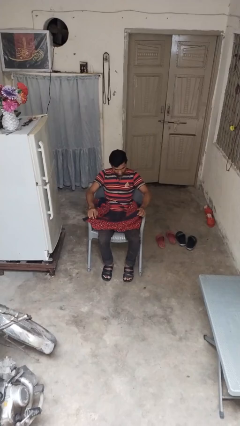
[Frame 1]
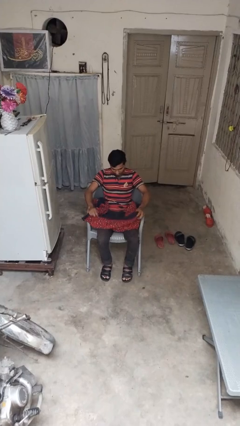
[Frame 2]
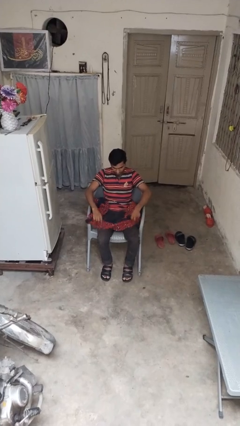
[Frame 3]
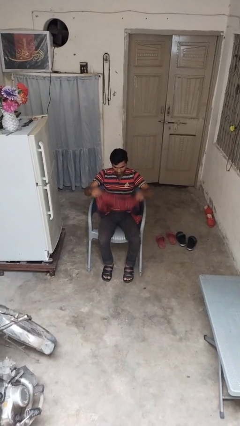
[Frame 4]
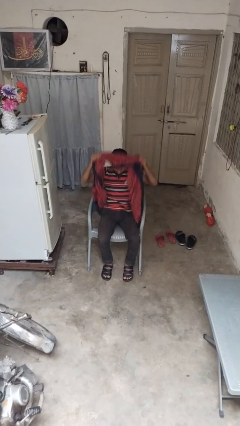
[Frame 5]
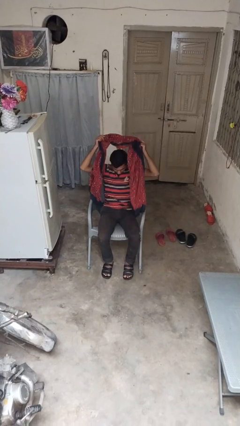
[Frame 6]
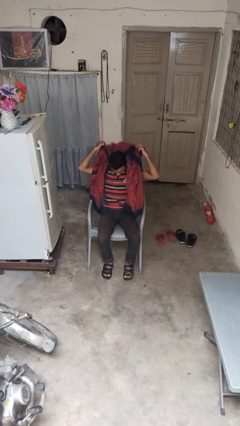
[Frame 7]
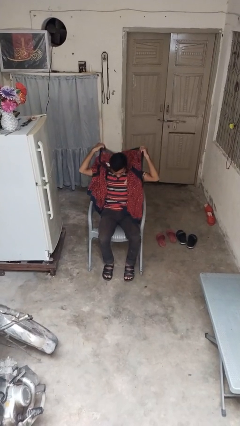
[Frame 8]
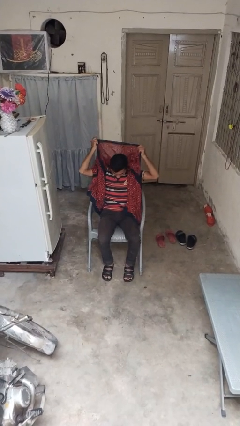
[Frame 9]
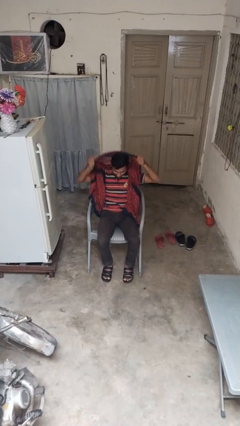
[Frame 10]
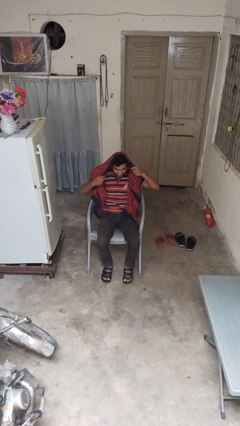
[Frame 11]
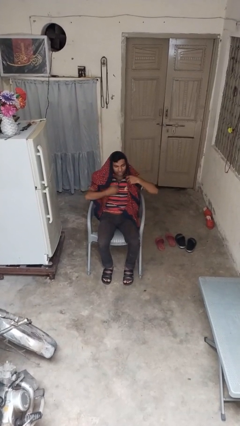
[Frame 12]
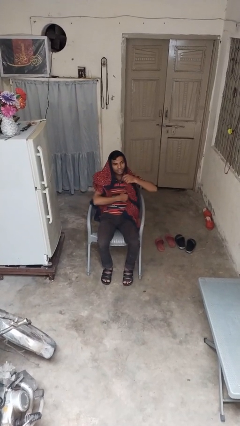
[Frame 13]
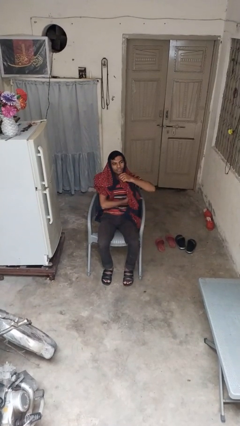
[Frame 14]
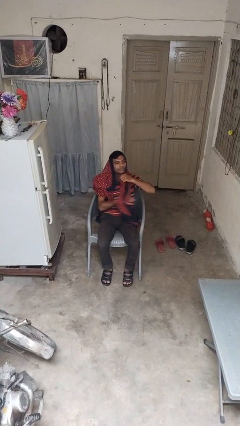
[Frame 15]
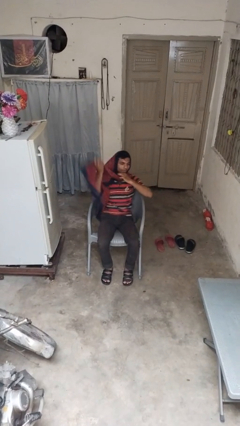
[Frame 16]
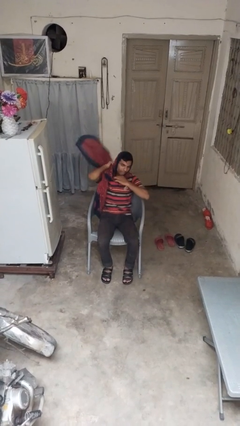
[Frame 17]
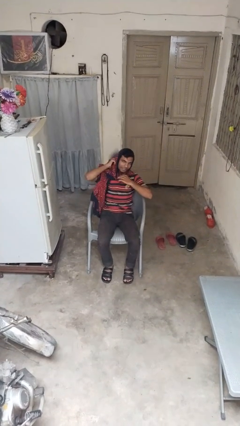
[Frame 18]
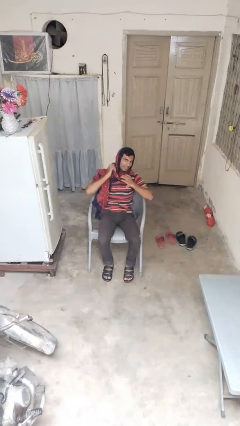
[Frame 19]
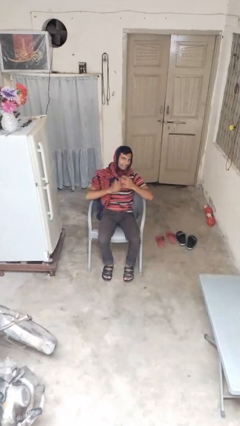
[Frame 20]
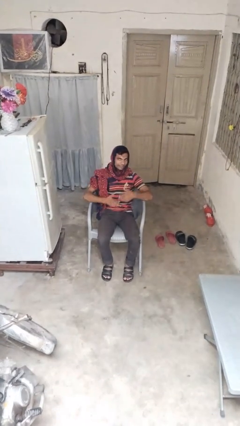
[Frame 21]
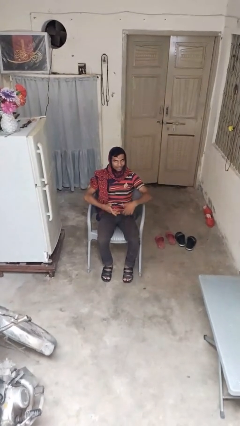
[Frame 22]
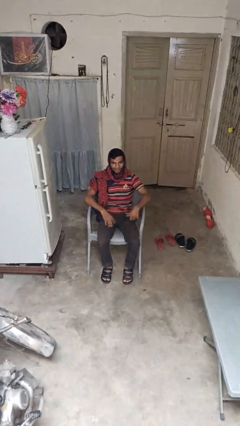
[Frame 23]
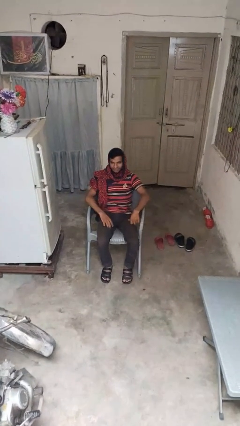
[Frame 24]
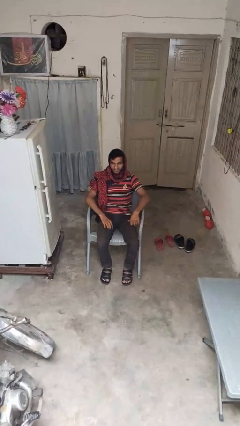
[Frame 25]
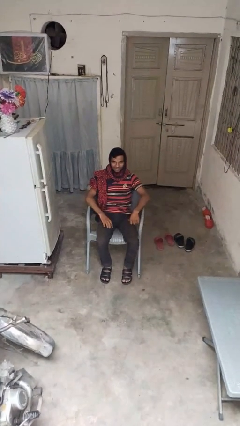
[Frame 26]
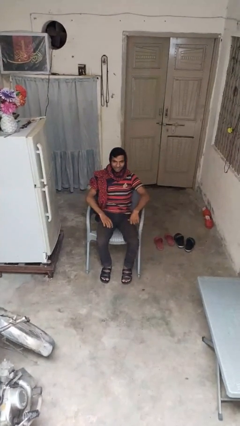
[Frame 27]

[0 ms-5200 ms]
person puts on scarf

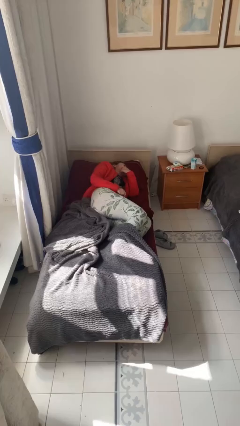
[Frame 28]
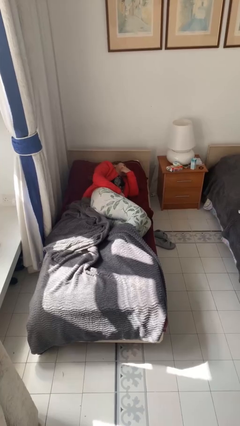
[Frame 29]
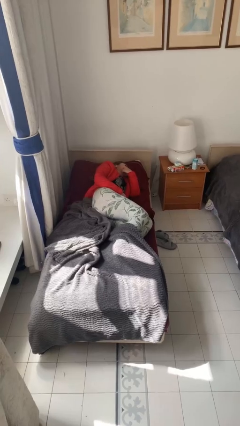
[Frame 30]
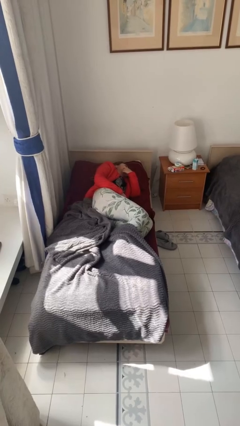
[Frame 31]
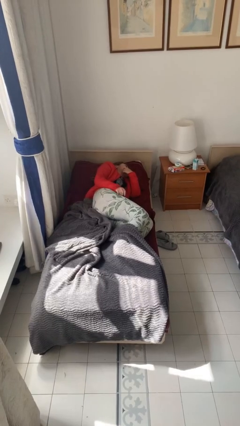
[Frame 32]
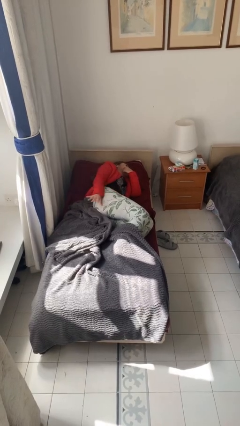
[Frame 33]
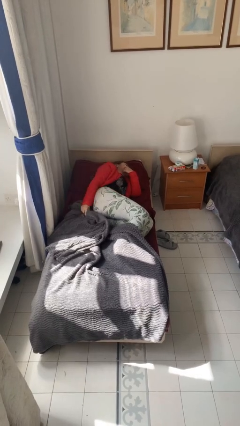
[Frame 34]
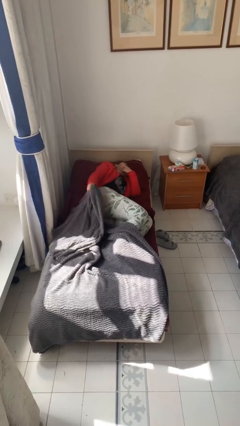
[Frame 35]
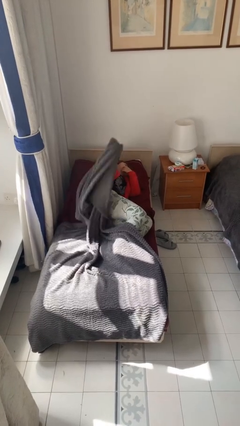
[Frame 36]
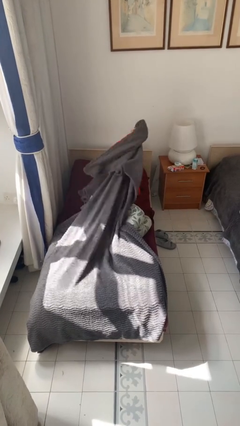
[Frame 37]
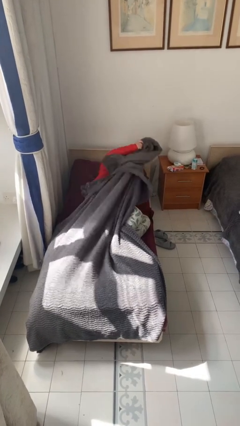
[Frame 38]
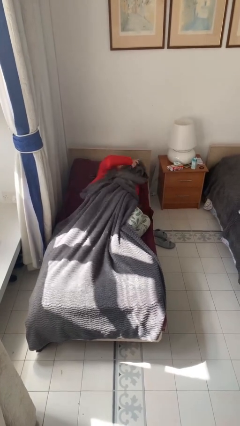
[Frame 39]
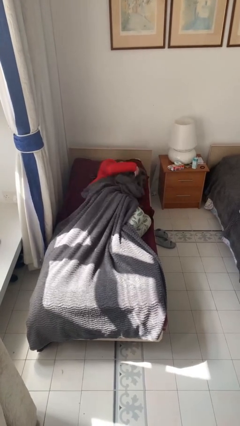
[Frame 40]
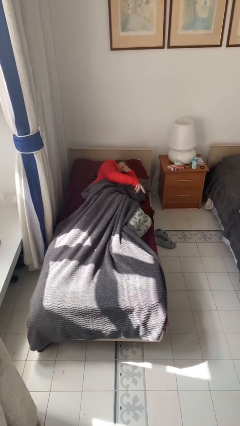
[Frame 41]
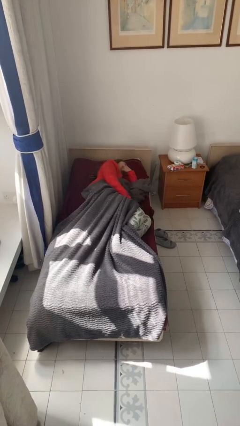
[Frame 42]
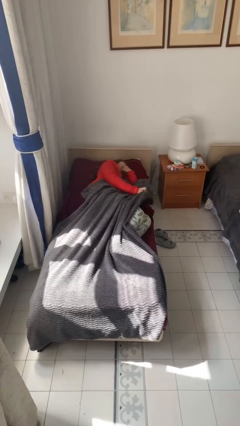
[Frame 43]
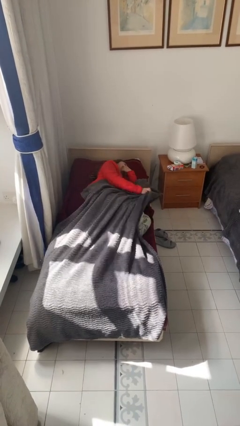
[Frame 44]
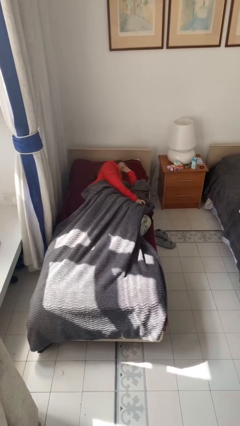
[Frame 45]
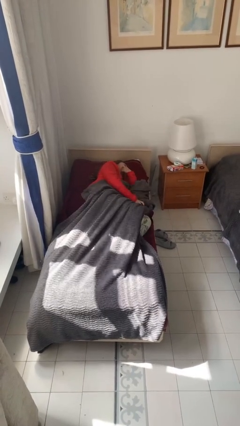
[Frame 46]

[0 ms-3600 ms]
person covers with bedsheets

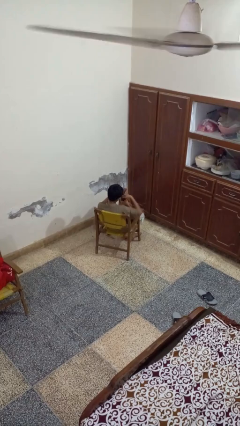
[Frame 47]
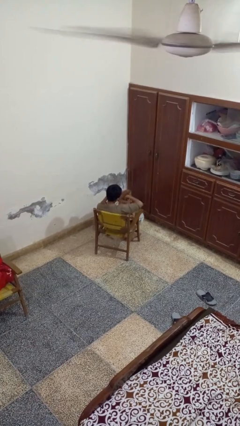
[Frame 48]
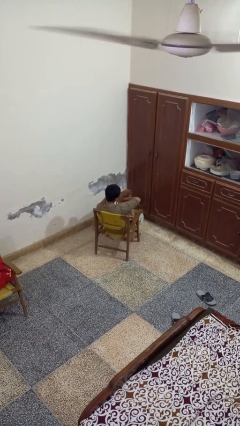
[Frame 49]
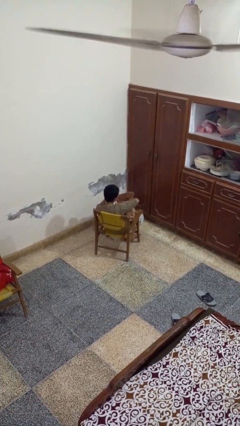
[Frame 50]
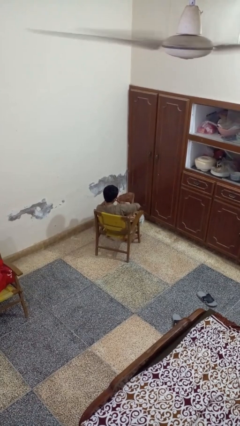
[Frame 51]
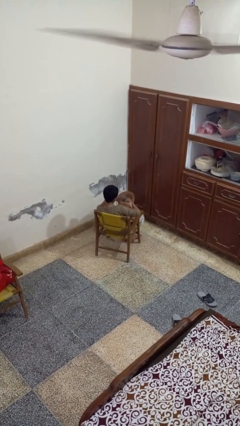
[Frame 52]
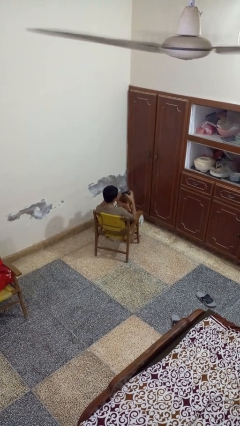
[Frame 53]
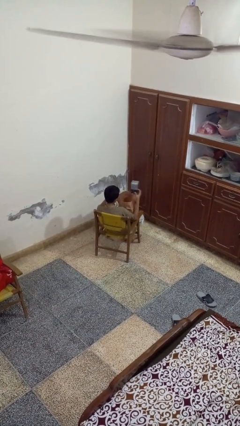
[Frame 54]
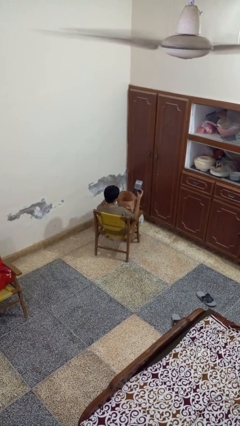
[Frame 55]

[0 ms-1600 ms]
person takes object from bag

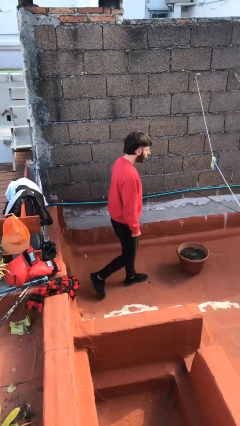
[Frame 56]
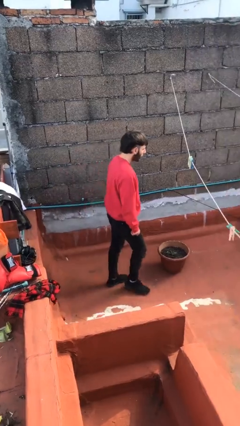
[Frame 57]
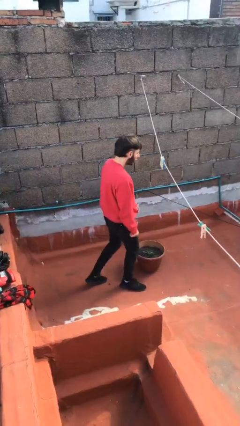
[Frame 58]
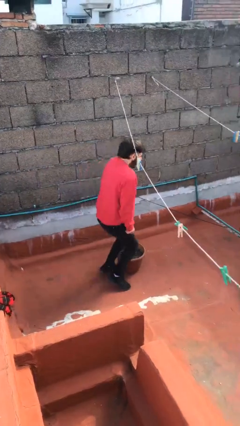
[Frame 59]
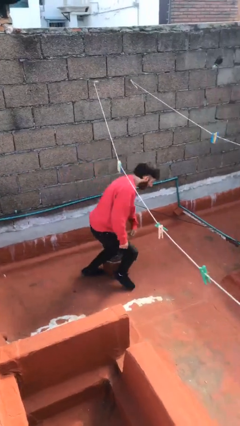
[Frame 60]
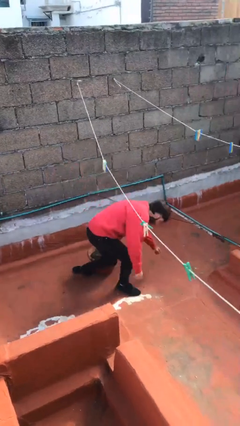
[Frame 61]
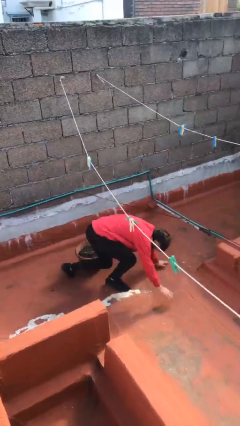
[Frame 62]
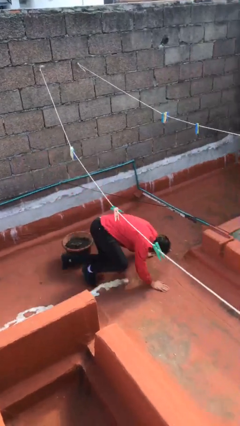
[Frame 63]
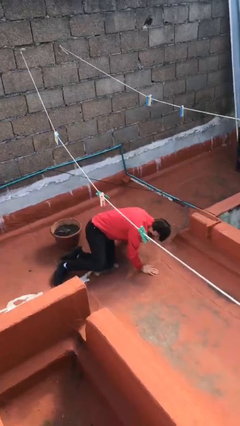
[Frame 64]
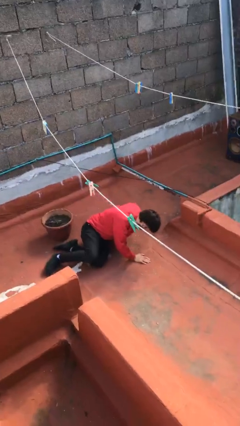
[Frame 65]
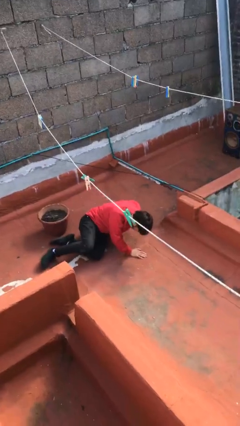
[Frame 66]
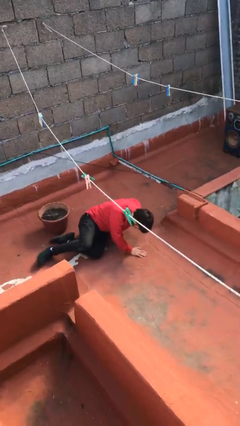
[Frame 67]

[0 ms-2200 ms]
person trips on object on floor

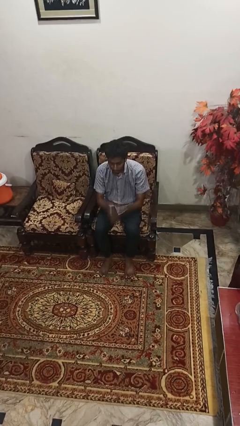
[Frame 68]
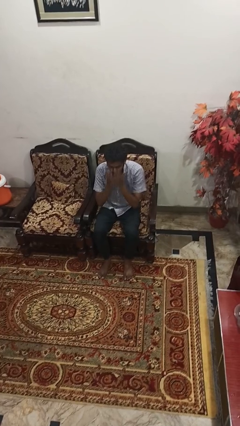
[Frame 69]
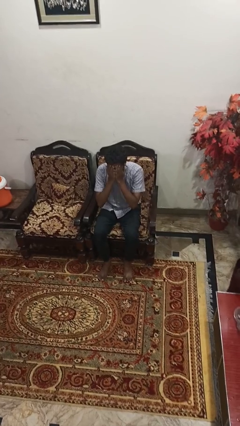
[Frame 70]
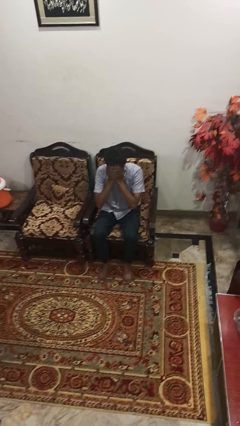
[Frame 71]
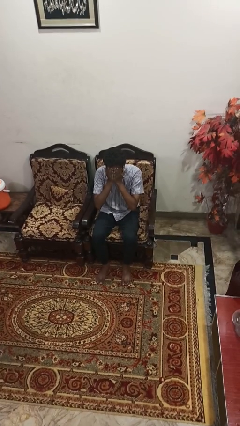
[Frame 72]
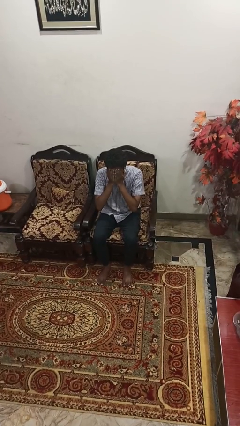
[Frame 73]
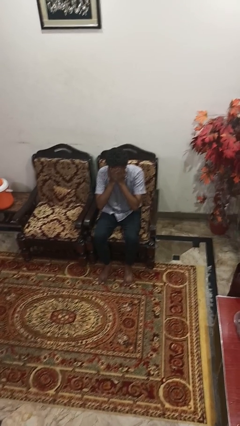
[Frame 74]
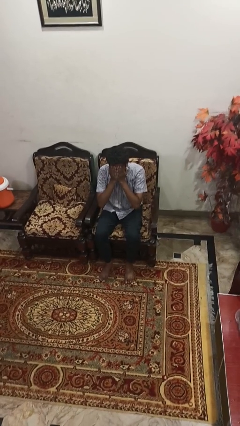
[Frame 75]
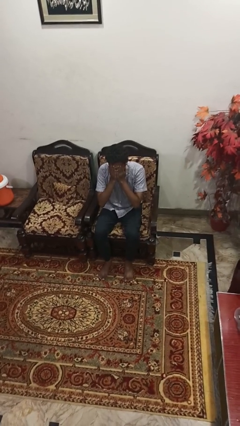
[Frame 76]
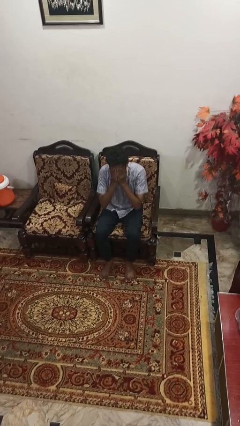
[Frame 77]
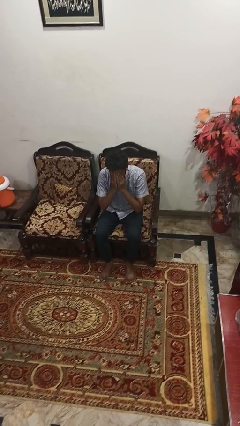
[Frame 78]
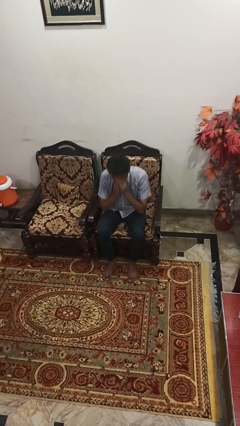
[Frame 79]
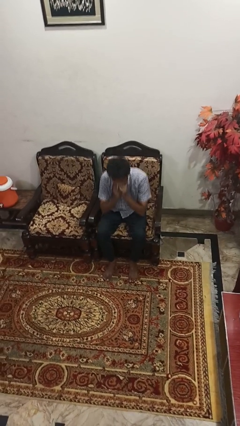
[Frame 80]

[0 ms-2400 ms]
person covers face with hands

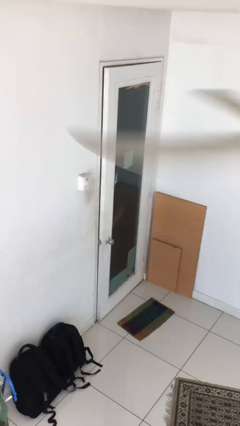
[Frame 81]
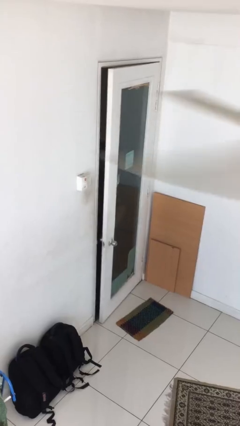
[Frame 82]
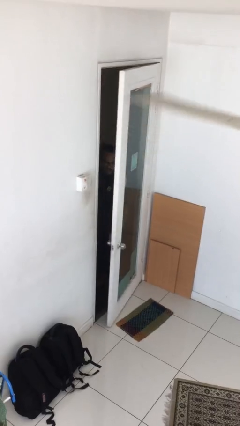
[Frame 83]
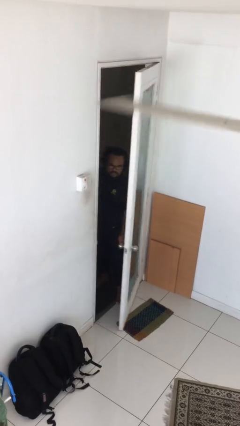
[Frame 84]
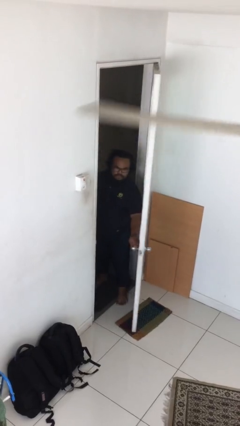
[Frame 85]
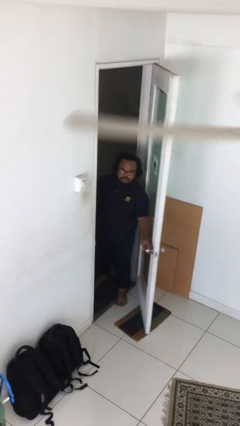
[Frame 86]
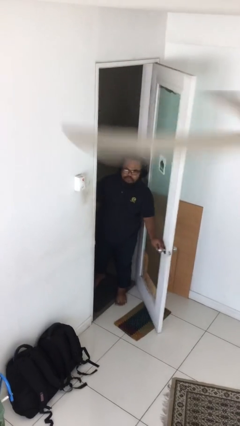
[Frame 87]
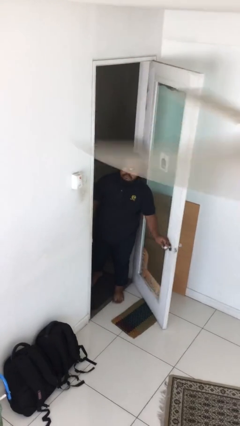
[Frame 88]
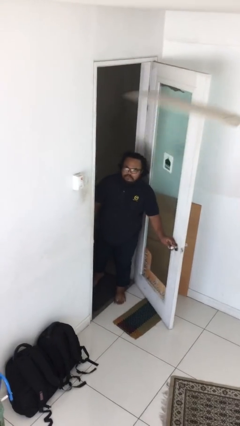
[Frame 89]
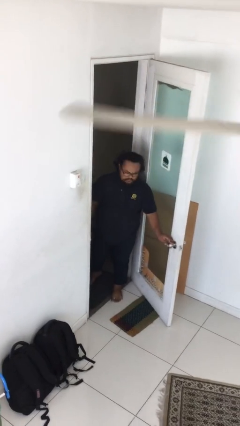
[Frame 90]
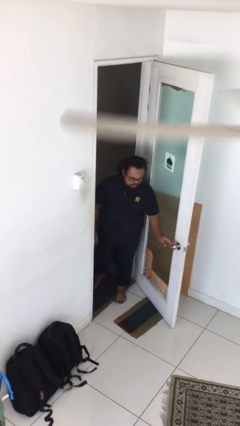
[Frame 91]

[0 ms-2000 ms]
person opens facility door

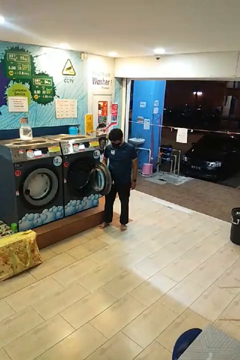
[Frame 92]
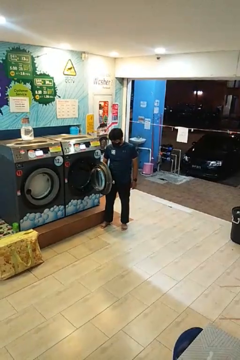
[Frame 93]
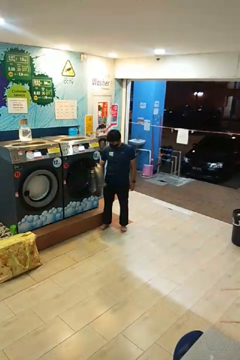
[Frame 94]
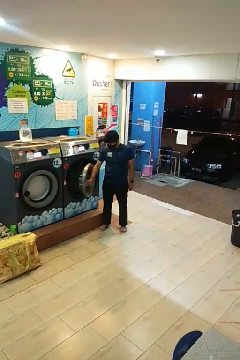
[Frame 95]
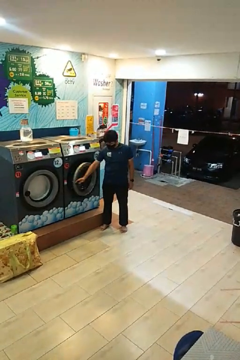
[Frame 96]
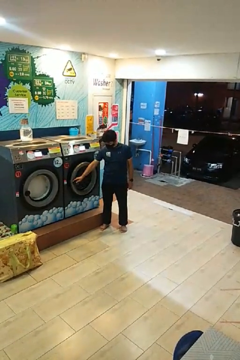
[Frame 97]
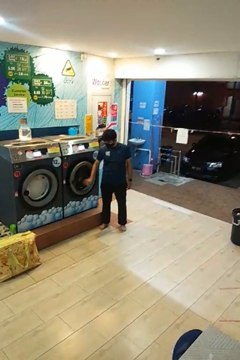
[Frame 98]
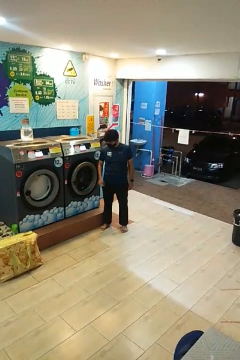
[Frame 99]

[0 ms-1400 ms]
person closes clothes washer
